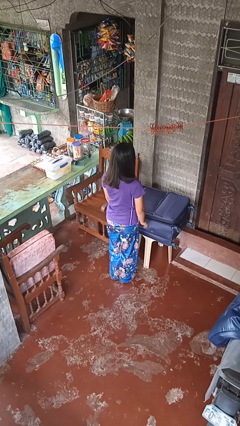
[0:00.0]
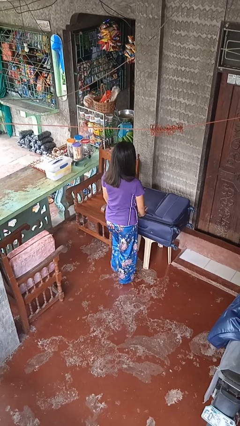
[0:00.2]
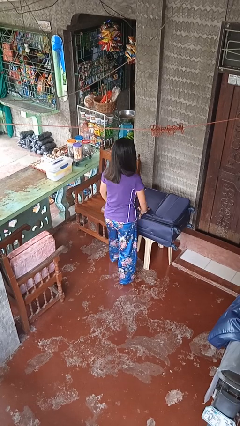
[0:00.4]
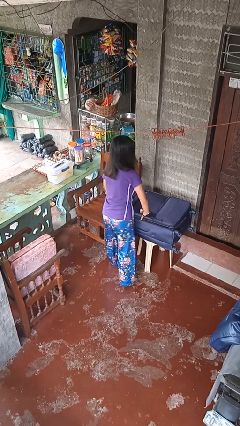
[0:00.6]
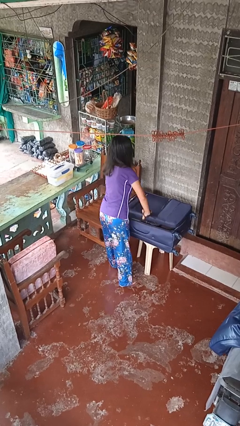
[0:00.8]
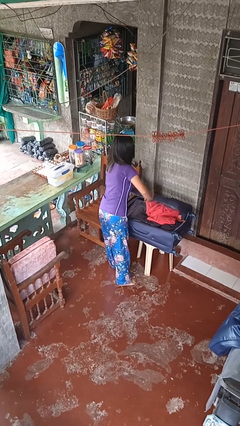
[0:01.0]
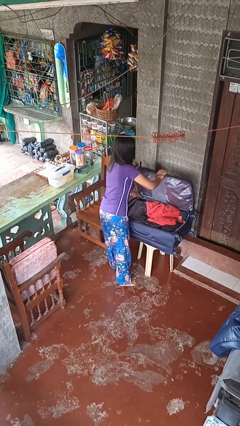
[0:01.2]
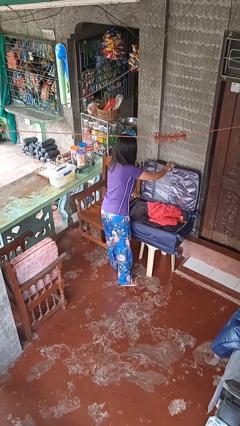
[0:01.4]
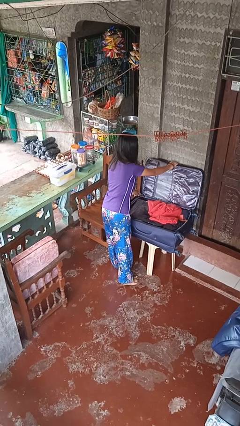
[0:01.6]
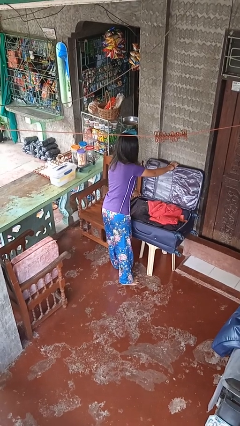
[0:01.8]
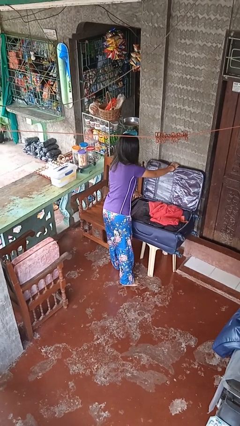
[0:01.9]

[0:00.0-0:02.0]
person opens suitcase

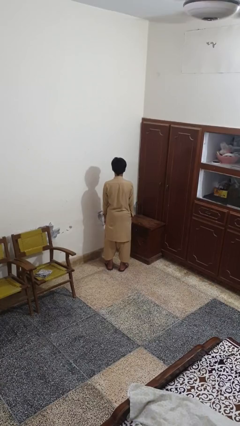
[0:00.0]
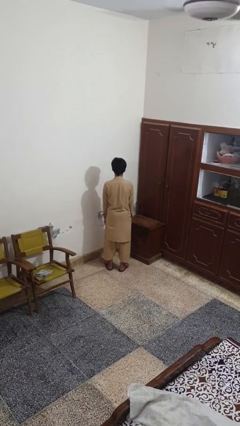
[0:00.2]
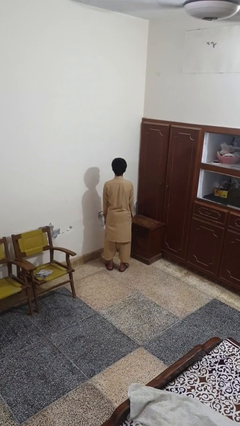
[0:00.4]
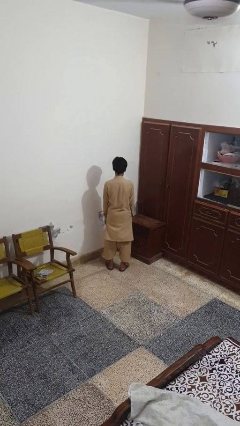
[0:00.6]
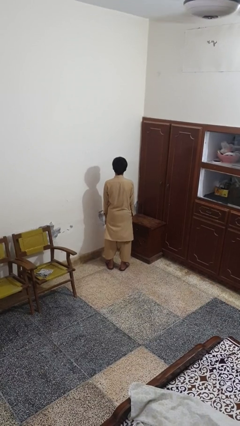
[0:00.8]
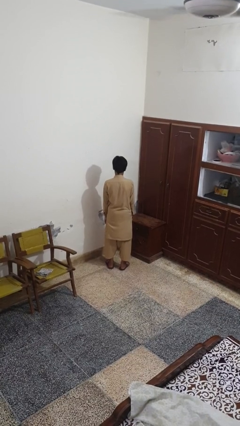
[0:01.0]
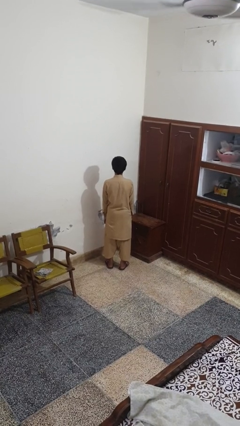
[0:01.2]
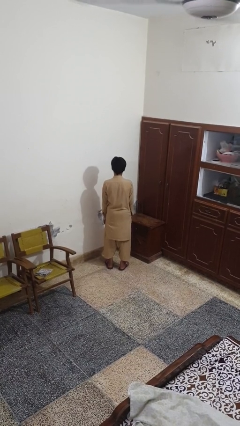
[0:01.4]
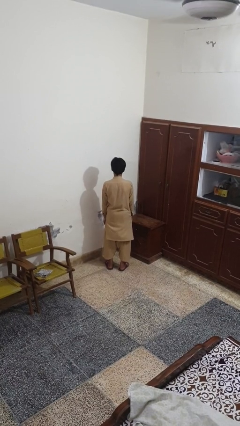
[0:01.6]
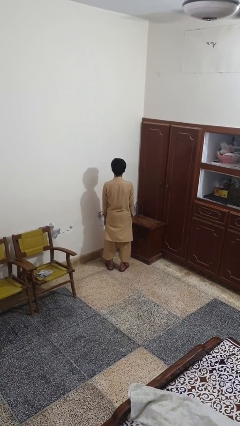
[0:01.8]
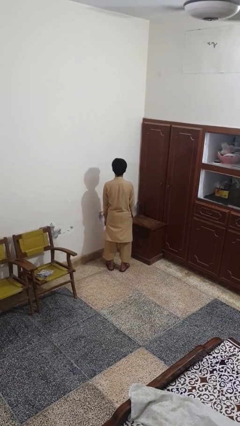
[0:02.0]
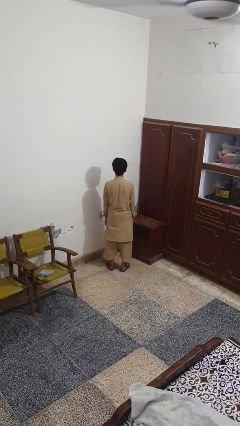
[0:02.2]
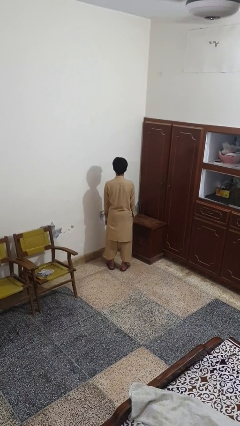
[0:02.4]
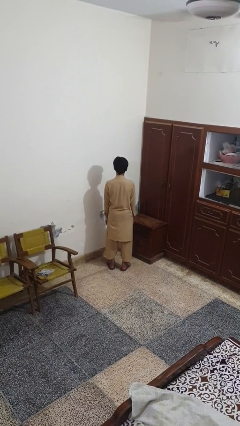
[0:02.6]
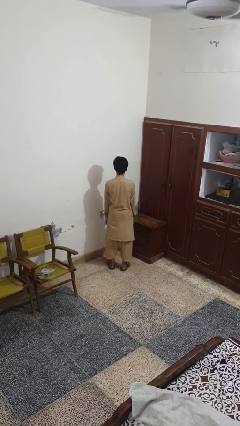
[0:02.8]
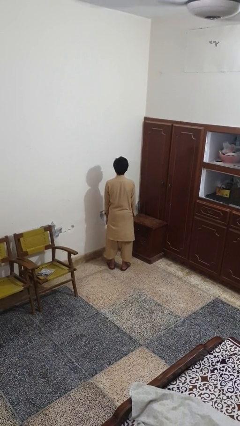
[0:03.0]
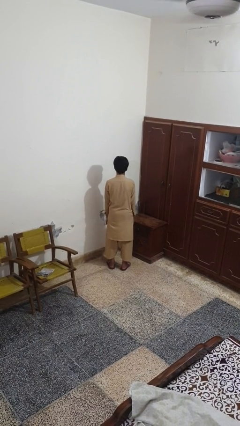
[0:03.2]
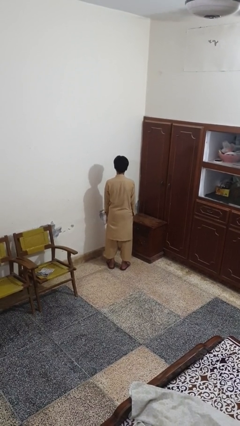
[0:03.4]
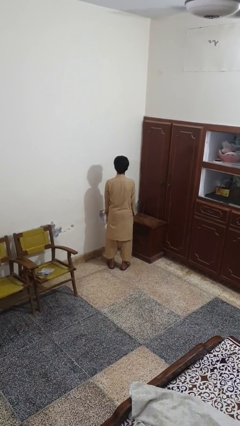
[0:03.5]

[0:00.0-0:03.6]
person nods head

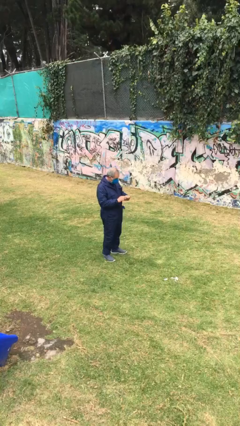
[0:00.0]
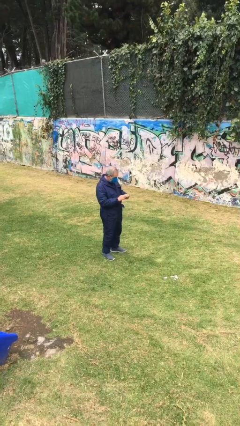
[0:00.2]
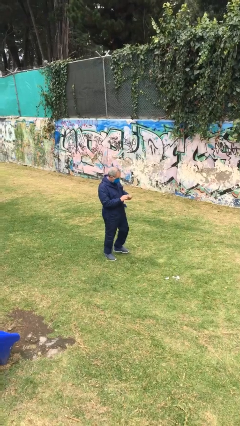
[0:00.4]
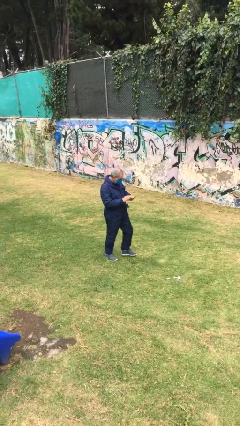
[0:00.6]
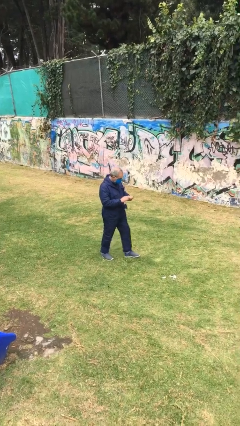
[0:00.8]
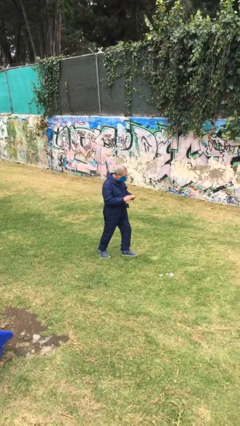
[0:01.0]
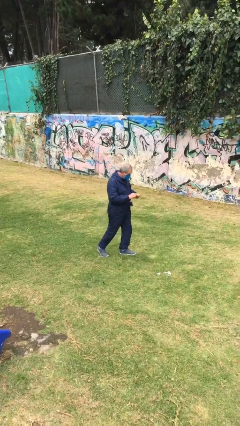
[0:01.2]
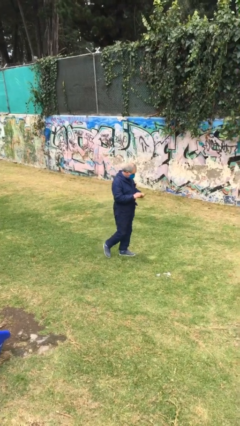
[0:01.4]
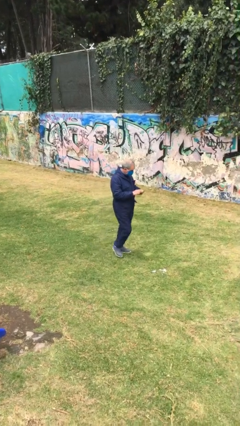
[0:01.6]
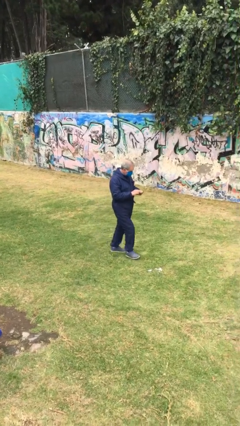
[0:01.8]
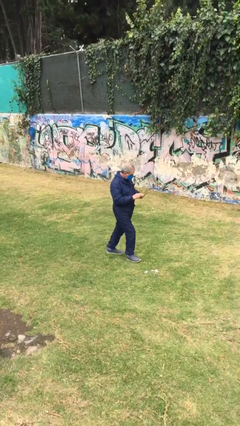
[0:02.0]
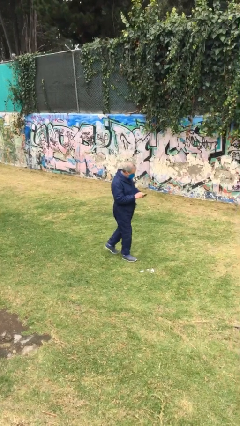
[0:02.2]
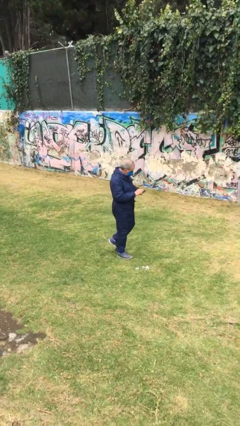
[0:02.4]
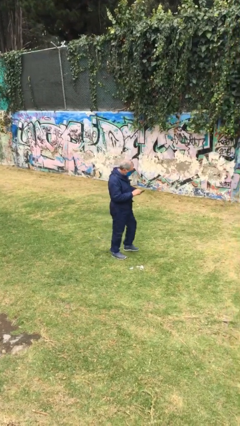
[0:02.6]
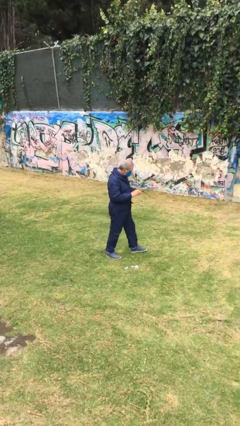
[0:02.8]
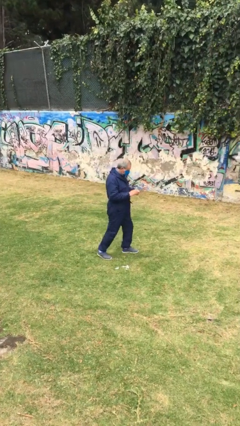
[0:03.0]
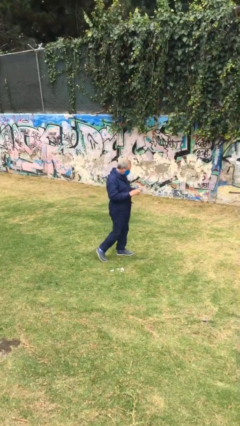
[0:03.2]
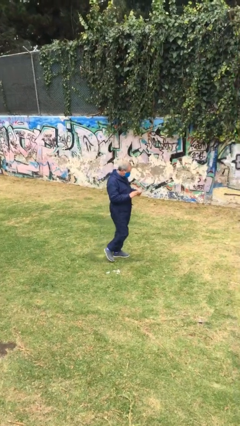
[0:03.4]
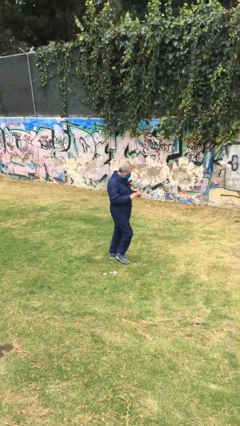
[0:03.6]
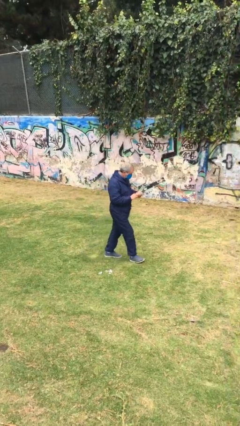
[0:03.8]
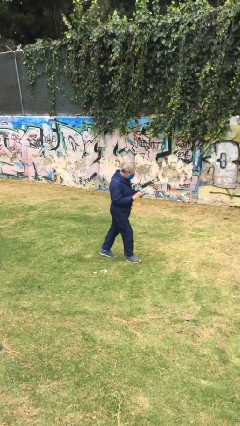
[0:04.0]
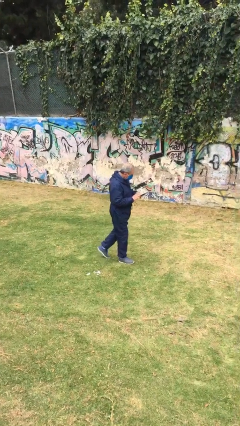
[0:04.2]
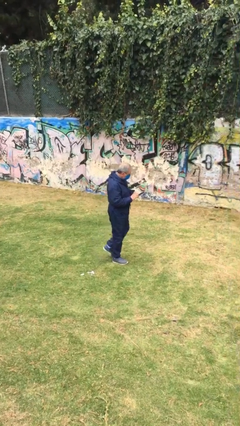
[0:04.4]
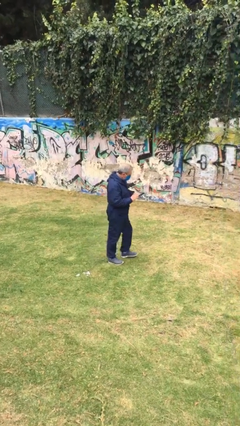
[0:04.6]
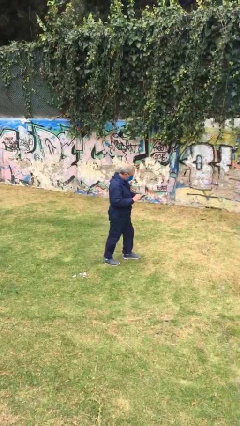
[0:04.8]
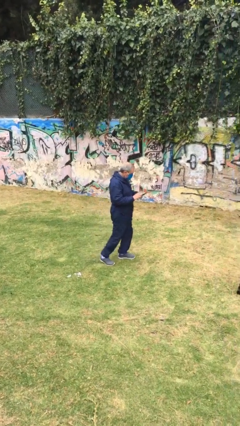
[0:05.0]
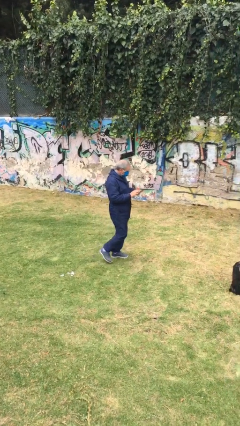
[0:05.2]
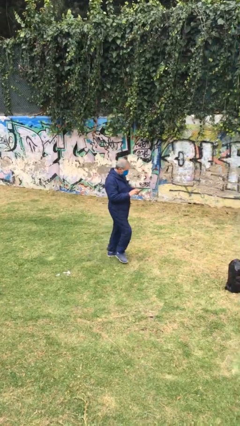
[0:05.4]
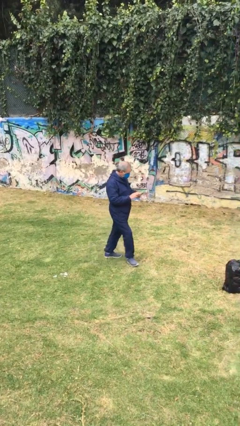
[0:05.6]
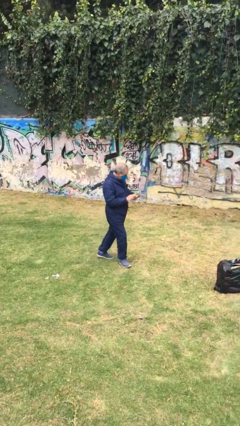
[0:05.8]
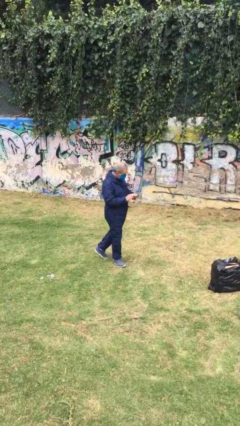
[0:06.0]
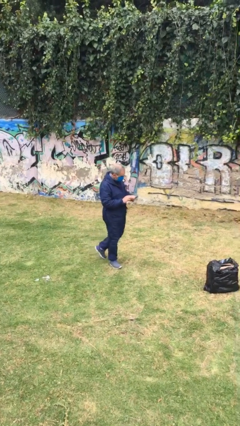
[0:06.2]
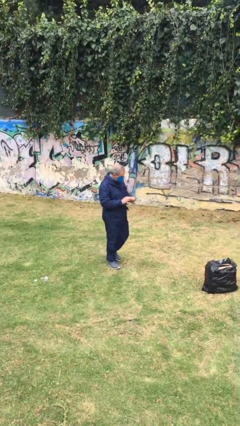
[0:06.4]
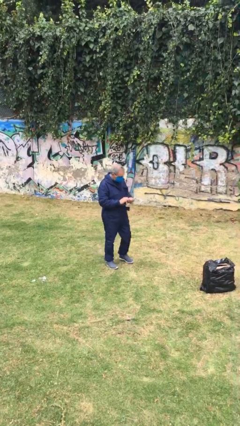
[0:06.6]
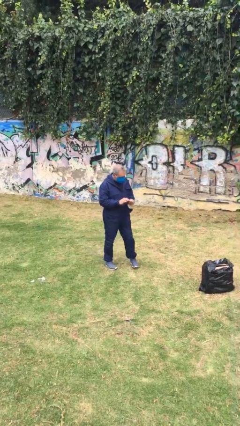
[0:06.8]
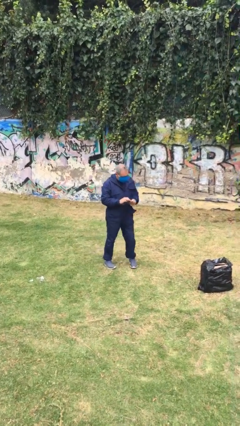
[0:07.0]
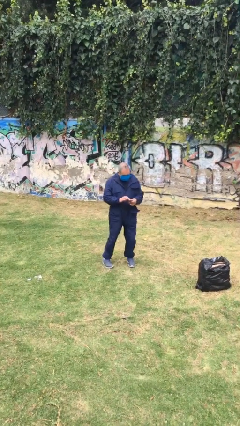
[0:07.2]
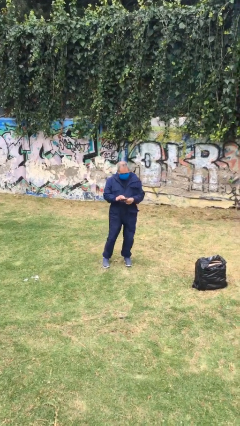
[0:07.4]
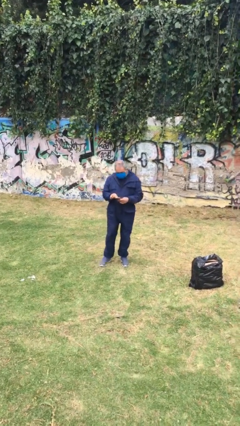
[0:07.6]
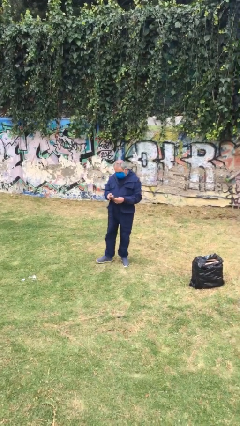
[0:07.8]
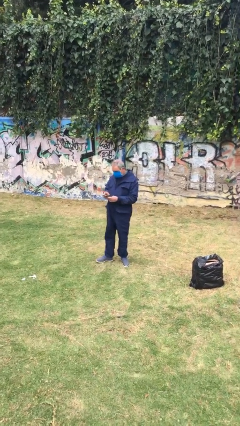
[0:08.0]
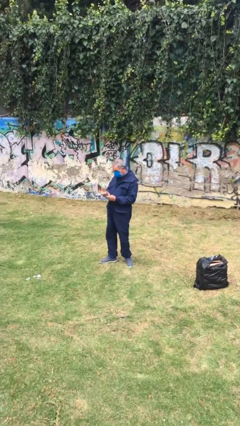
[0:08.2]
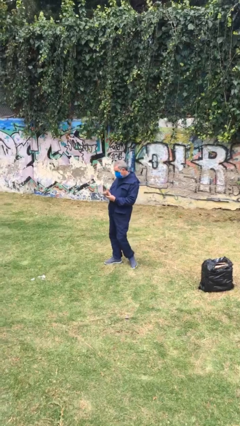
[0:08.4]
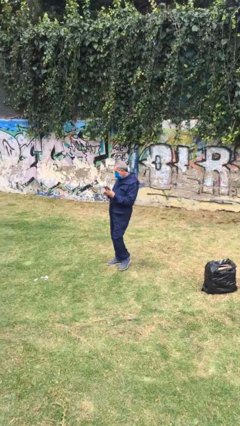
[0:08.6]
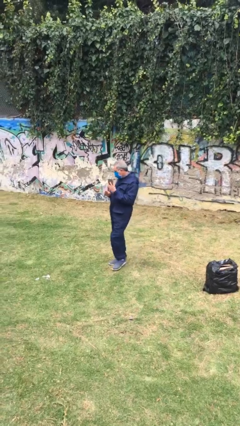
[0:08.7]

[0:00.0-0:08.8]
person texts on phone

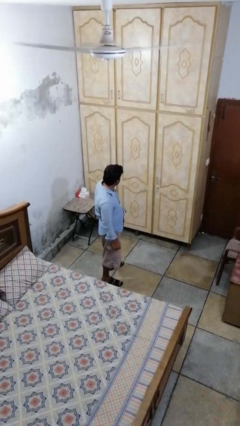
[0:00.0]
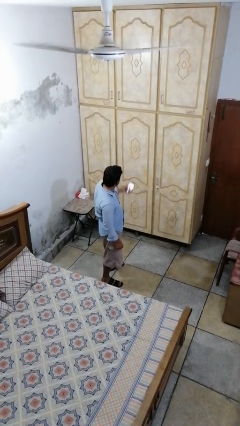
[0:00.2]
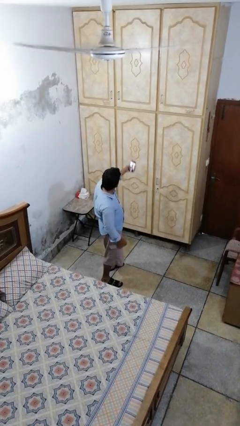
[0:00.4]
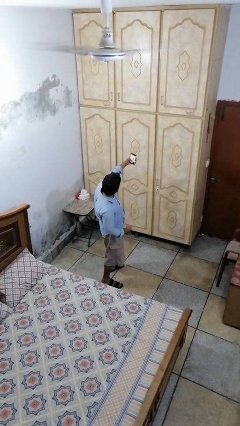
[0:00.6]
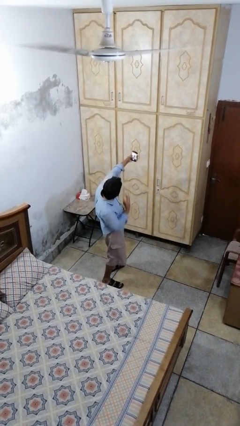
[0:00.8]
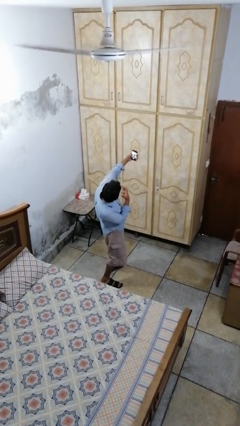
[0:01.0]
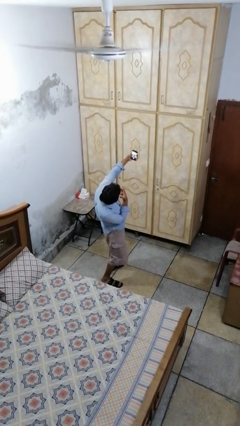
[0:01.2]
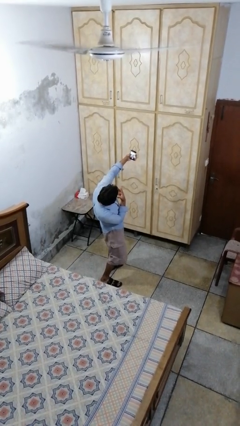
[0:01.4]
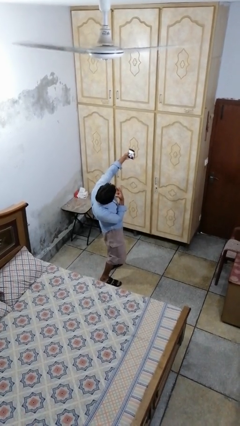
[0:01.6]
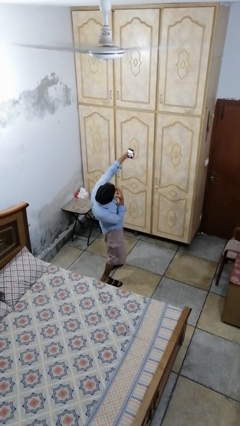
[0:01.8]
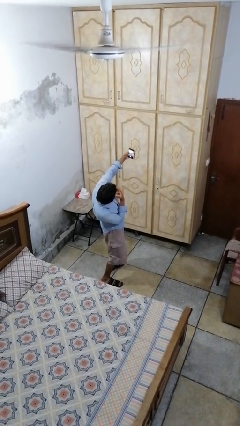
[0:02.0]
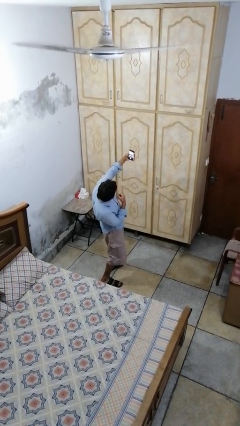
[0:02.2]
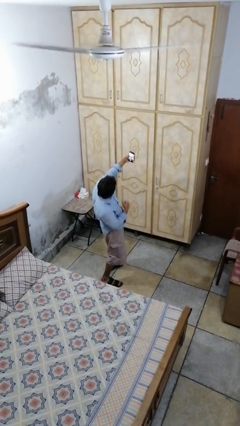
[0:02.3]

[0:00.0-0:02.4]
person takes selfie

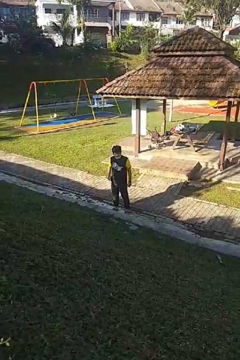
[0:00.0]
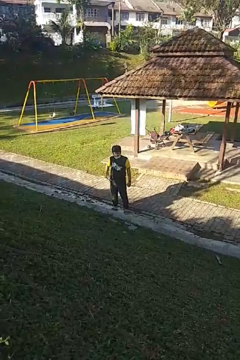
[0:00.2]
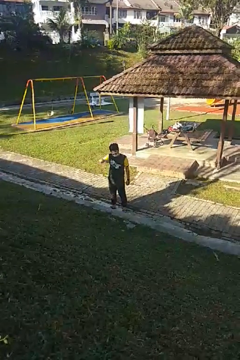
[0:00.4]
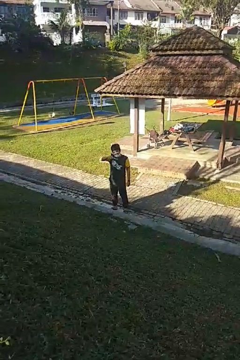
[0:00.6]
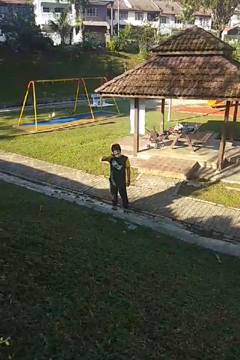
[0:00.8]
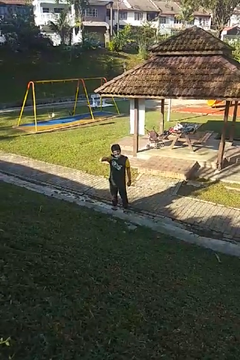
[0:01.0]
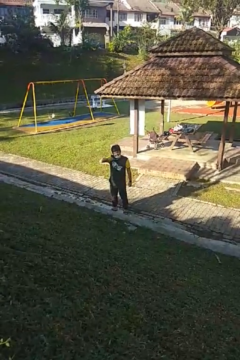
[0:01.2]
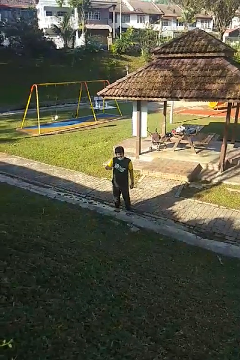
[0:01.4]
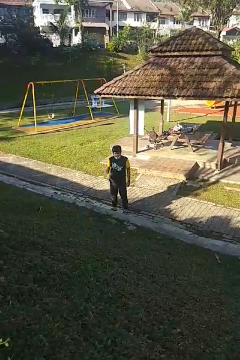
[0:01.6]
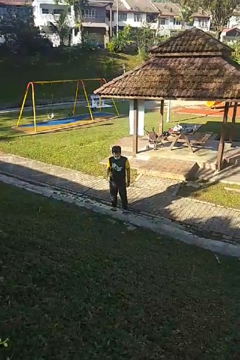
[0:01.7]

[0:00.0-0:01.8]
person brushes teeth
